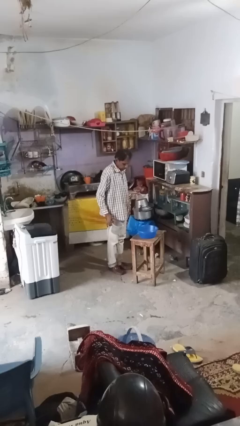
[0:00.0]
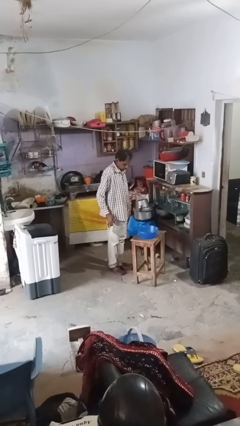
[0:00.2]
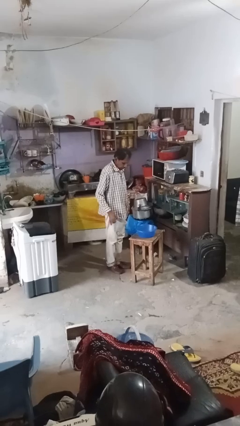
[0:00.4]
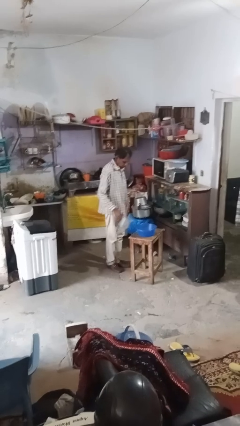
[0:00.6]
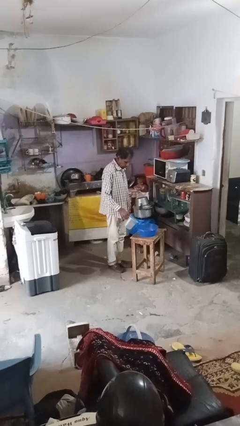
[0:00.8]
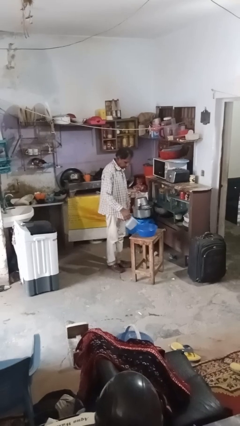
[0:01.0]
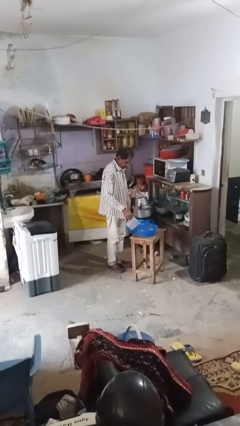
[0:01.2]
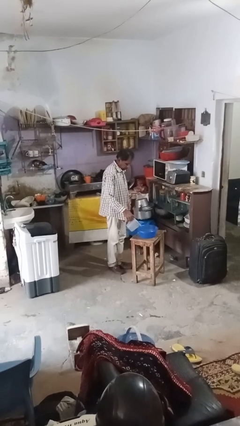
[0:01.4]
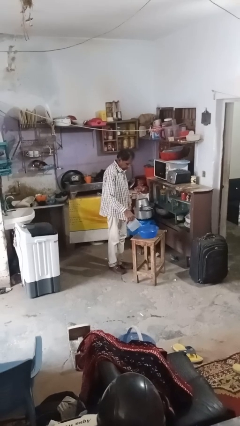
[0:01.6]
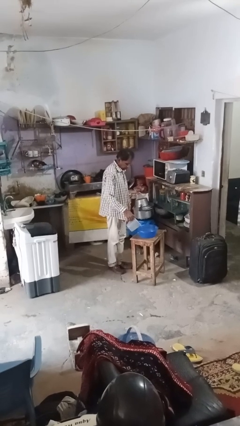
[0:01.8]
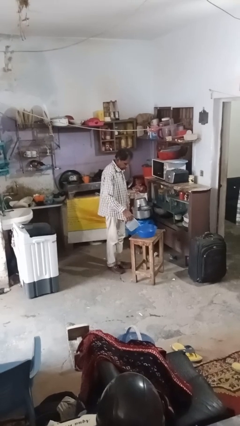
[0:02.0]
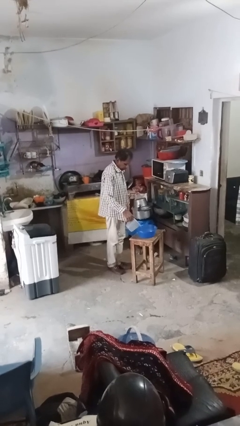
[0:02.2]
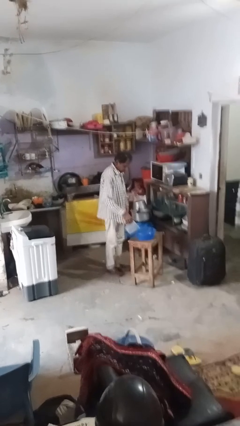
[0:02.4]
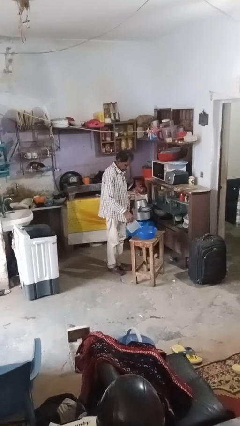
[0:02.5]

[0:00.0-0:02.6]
person pours into bowl

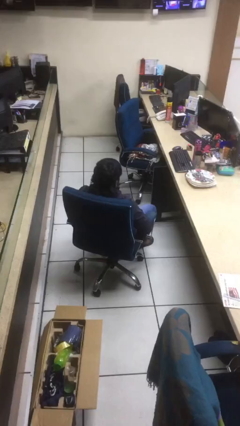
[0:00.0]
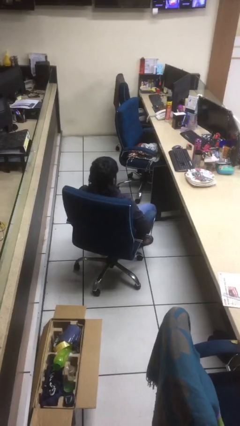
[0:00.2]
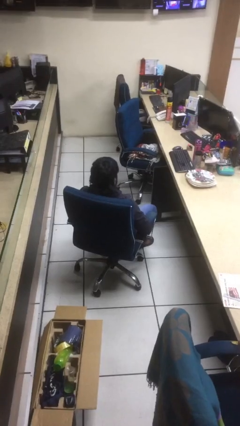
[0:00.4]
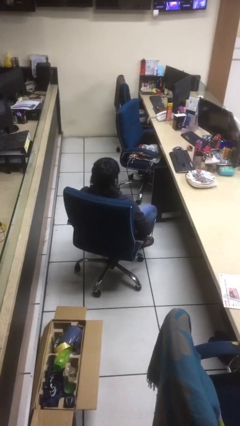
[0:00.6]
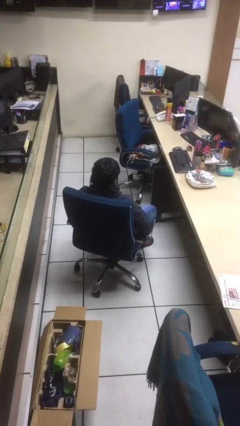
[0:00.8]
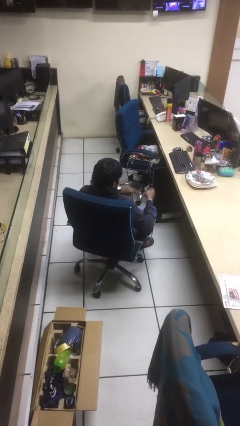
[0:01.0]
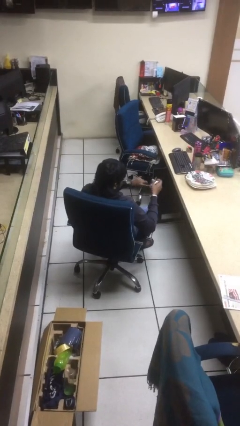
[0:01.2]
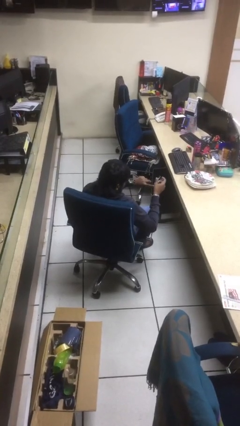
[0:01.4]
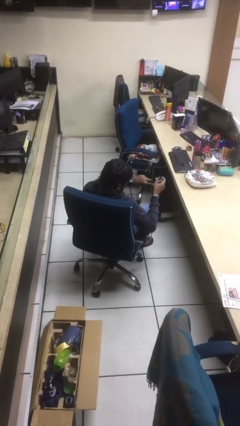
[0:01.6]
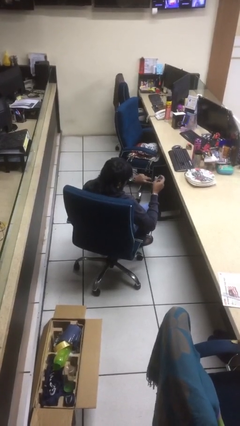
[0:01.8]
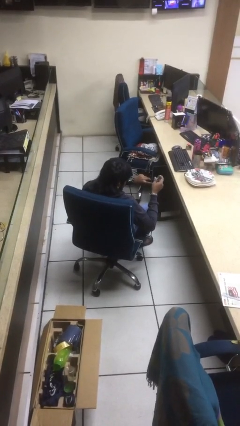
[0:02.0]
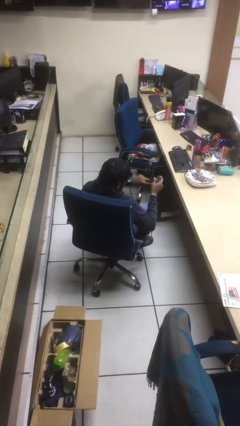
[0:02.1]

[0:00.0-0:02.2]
person clips fingernails

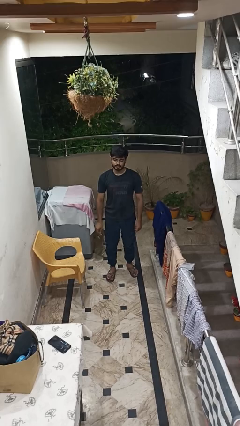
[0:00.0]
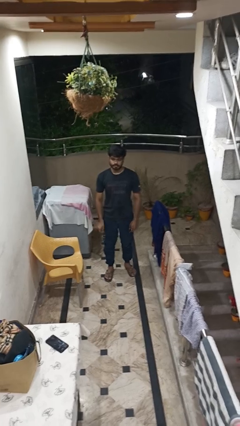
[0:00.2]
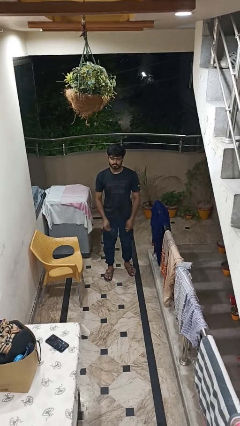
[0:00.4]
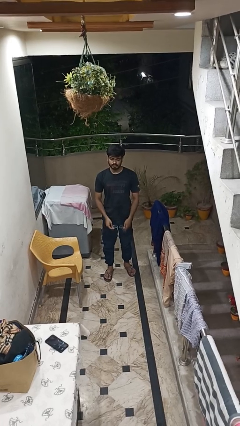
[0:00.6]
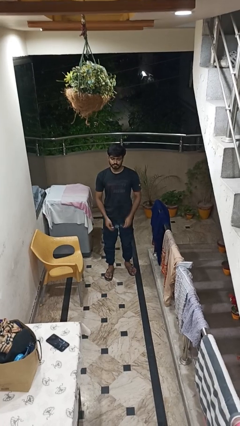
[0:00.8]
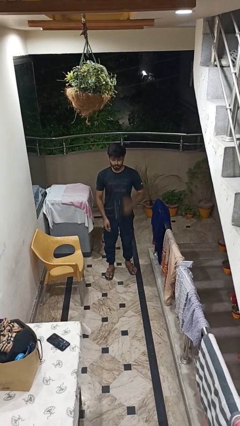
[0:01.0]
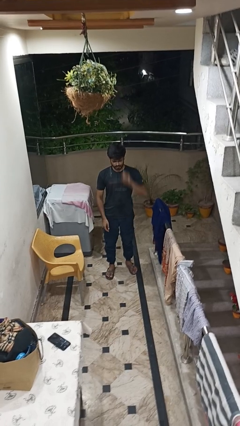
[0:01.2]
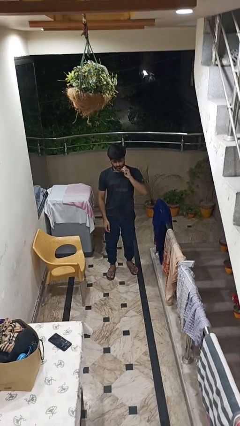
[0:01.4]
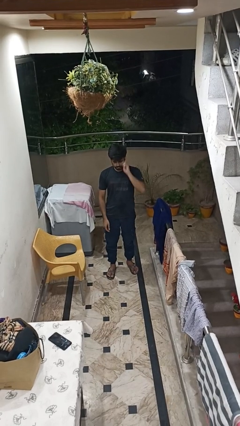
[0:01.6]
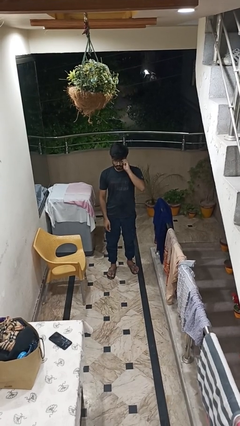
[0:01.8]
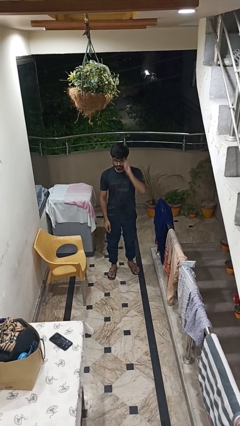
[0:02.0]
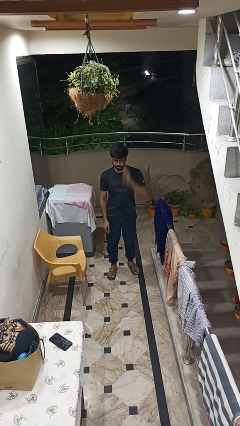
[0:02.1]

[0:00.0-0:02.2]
person puts on glasses

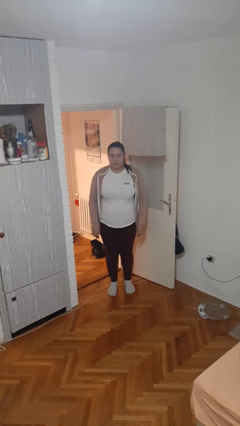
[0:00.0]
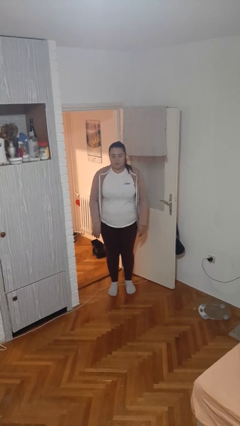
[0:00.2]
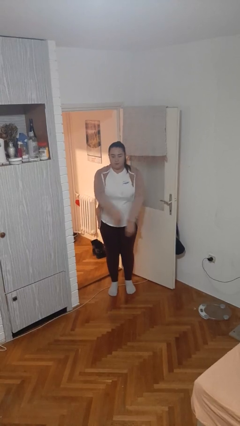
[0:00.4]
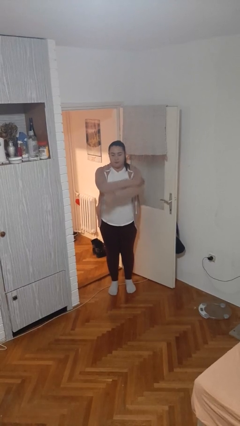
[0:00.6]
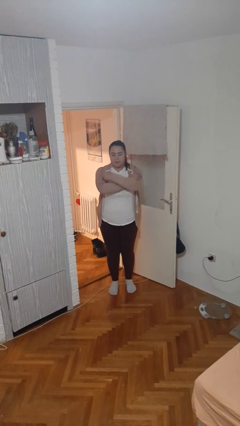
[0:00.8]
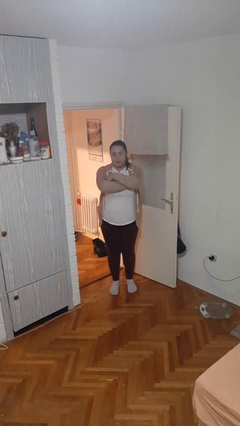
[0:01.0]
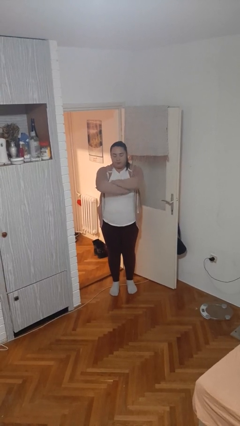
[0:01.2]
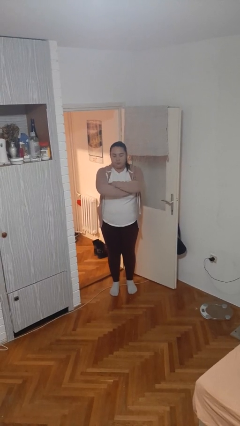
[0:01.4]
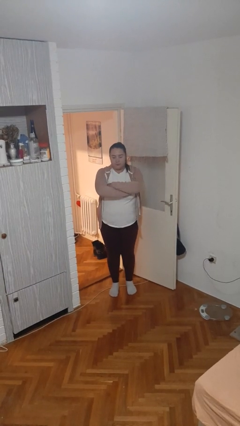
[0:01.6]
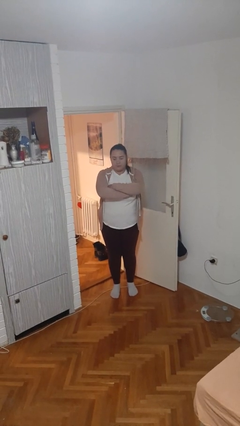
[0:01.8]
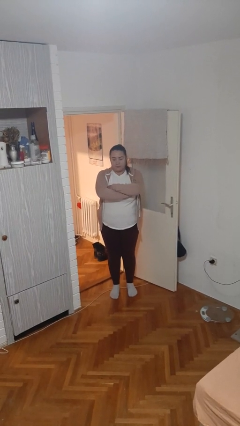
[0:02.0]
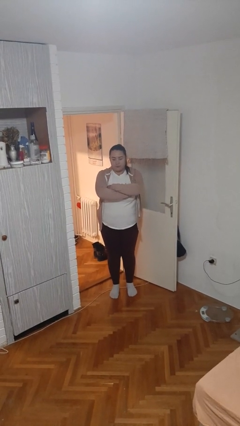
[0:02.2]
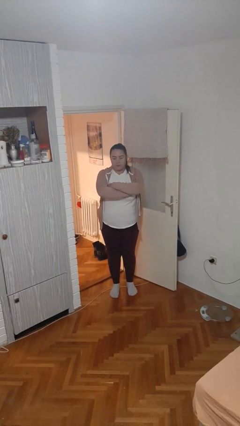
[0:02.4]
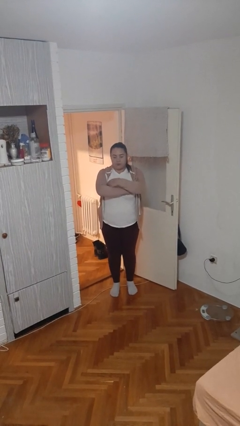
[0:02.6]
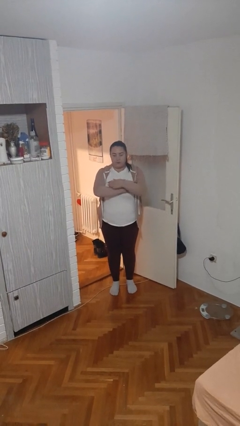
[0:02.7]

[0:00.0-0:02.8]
person crosses arms

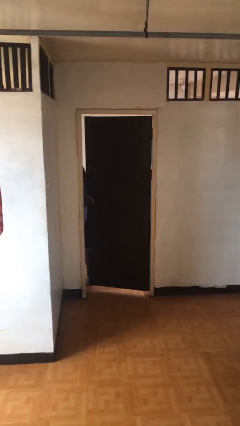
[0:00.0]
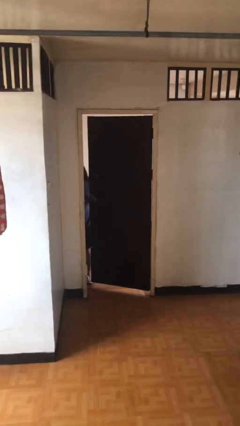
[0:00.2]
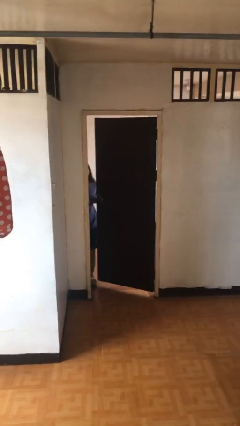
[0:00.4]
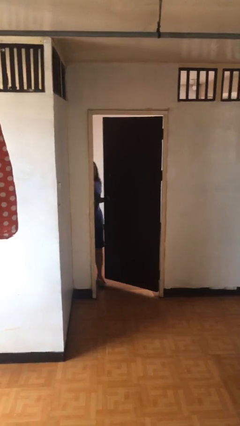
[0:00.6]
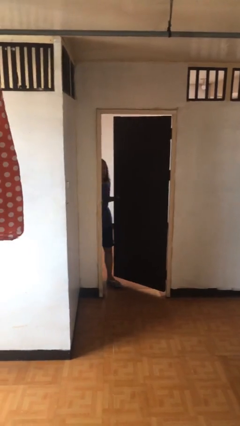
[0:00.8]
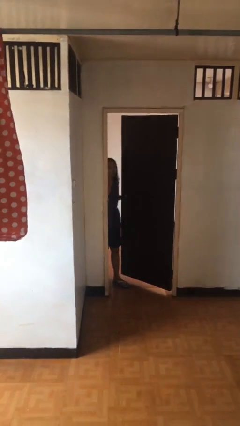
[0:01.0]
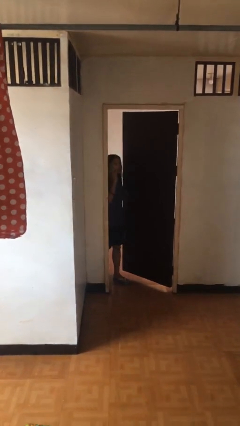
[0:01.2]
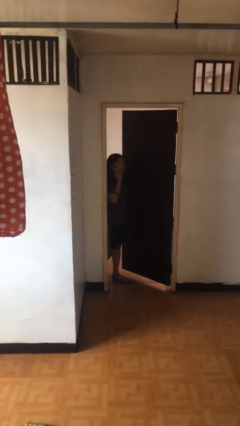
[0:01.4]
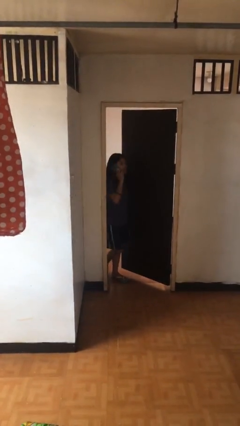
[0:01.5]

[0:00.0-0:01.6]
person opens facility door

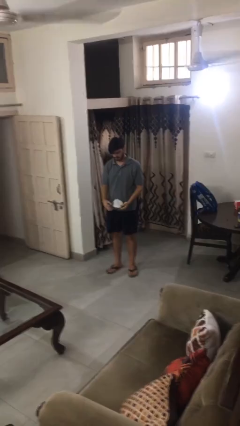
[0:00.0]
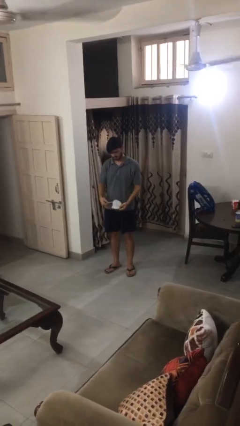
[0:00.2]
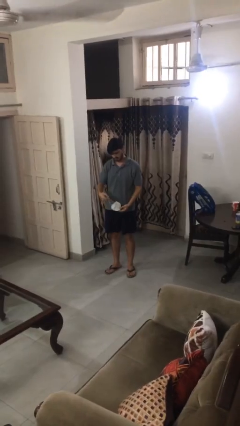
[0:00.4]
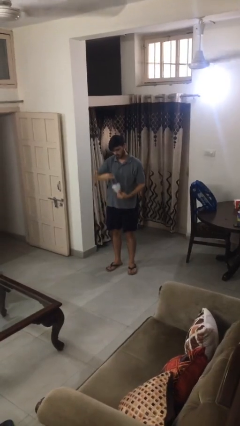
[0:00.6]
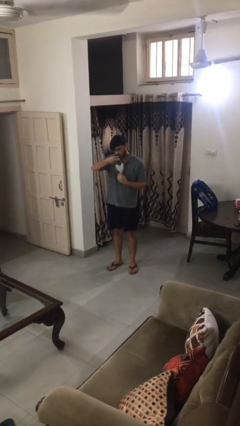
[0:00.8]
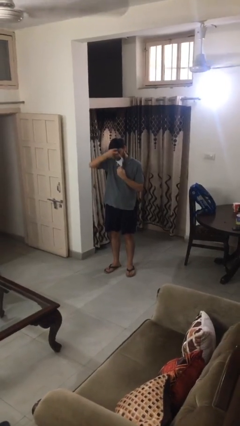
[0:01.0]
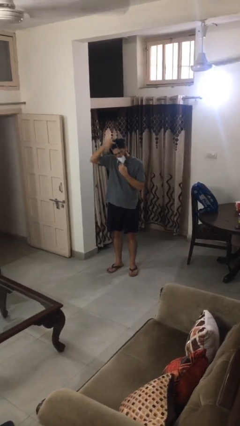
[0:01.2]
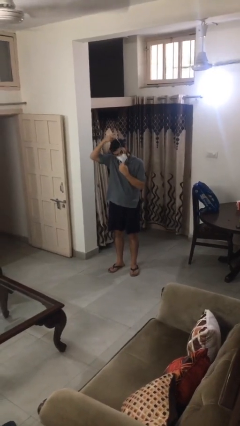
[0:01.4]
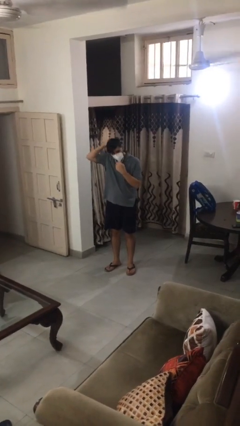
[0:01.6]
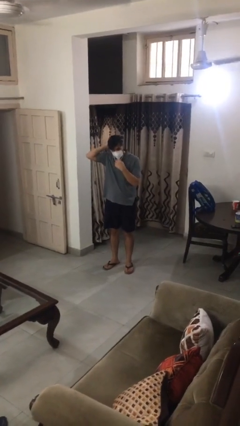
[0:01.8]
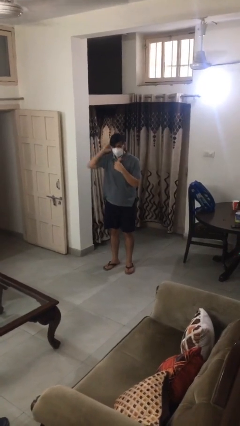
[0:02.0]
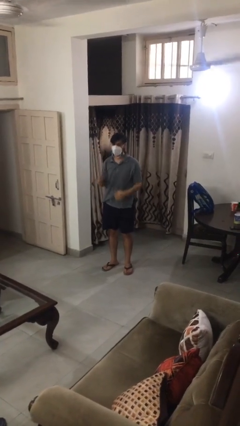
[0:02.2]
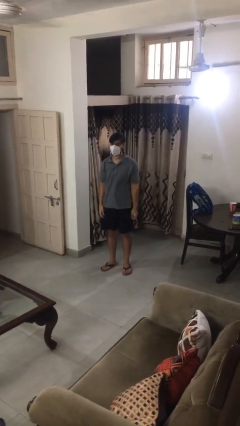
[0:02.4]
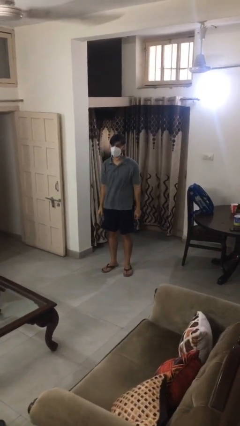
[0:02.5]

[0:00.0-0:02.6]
person puts on facemask

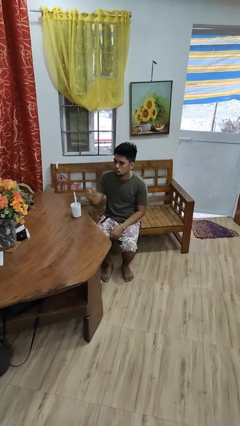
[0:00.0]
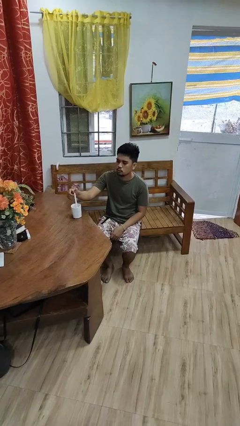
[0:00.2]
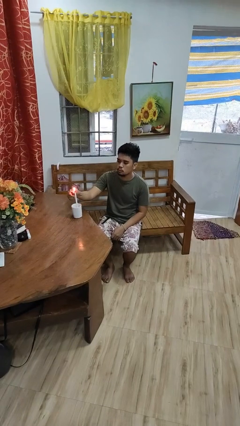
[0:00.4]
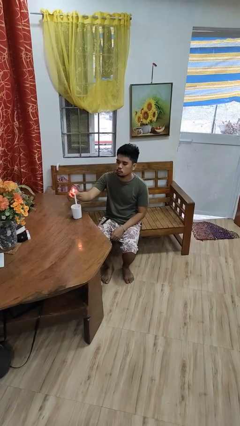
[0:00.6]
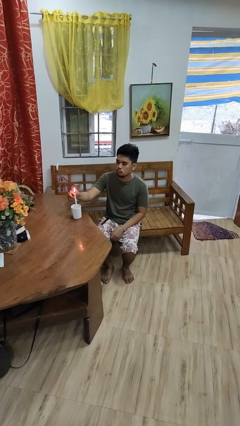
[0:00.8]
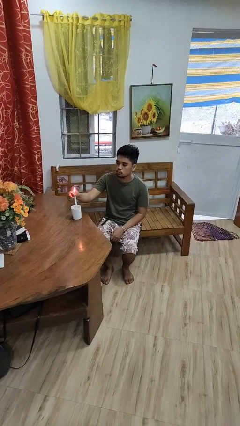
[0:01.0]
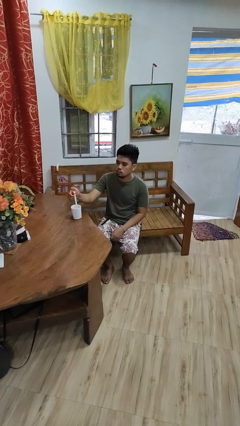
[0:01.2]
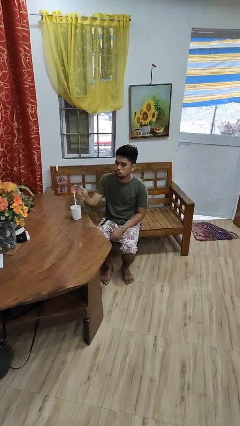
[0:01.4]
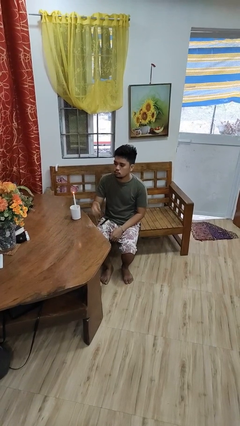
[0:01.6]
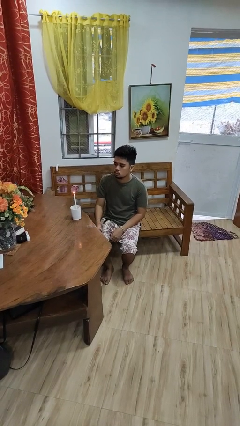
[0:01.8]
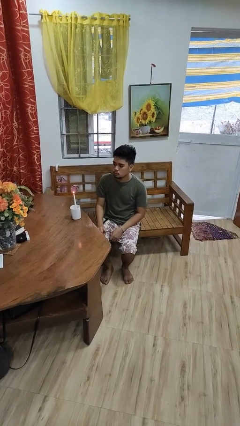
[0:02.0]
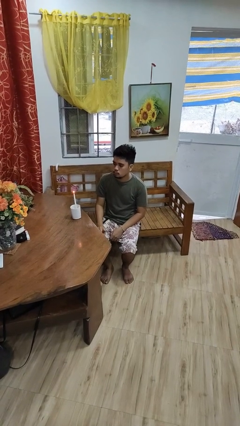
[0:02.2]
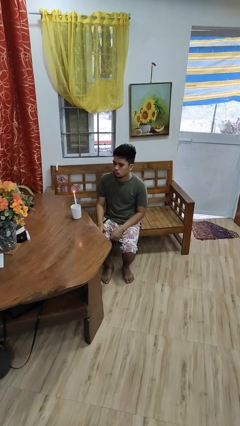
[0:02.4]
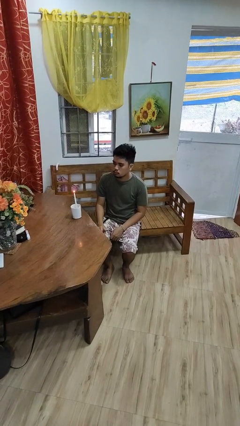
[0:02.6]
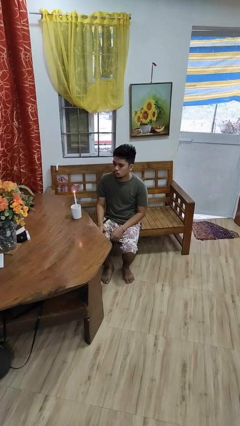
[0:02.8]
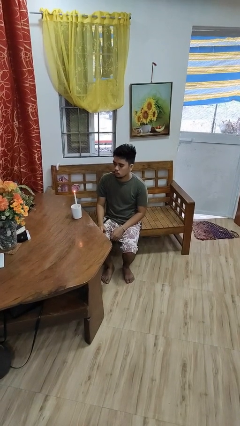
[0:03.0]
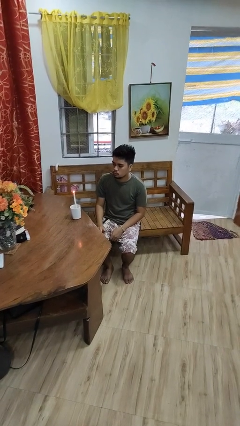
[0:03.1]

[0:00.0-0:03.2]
person lights candle

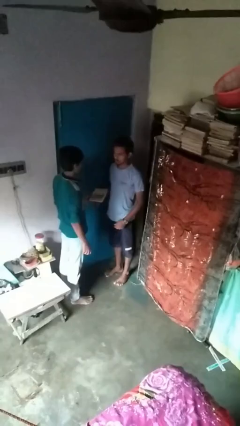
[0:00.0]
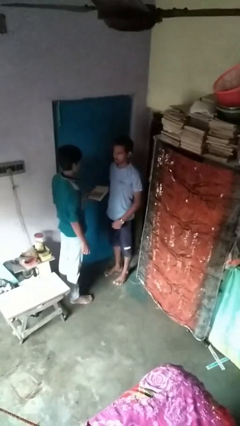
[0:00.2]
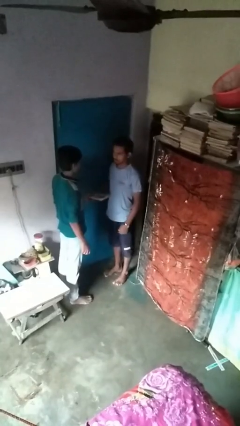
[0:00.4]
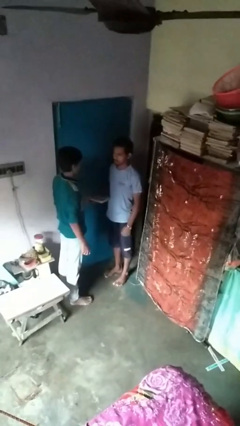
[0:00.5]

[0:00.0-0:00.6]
person transfers object to person
